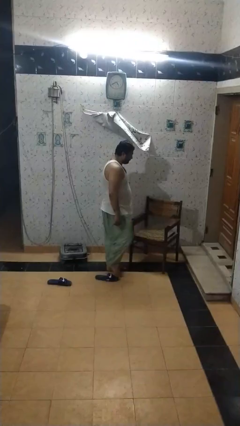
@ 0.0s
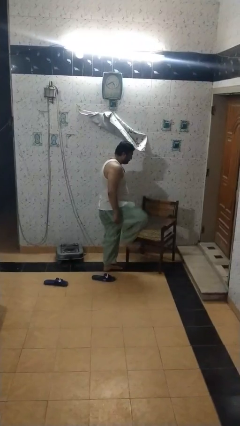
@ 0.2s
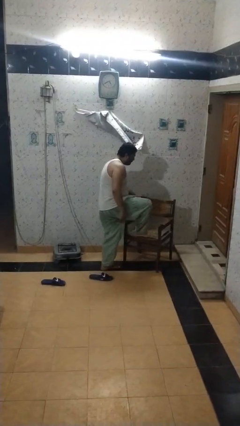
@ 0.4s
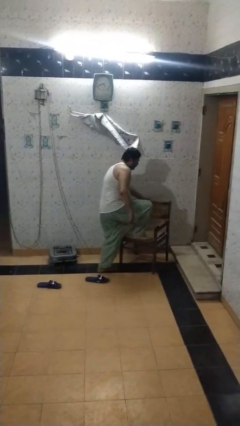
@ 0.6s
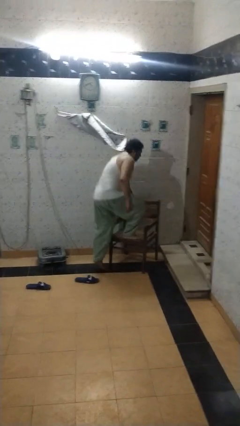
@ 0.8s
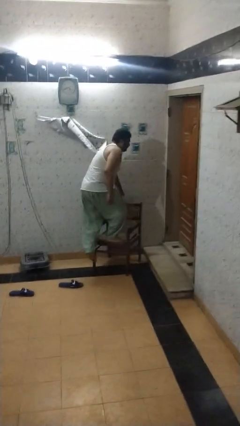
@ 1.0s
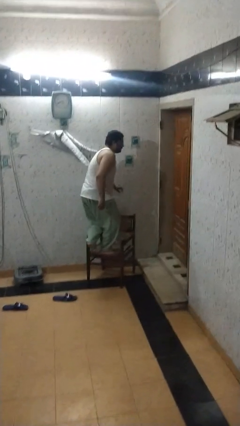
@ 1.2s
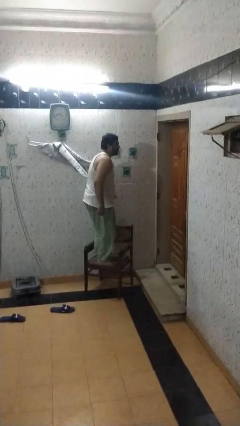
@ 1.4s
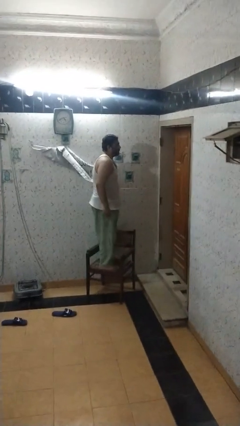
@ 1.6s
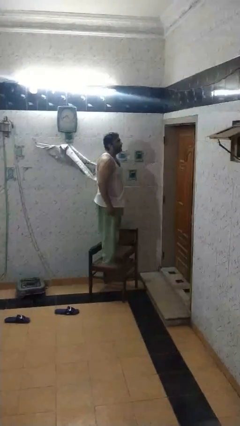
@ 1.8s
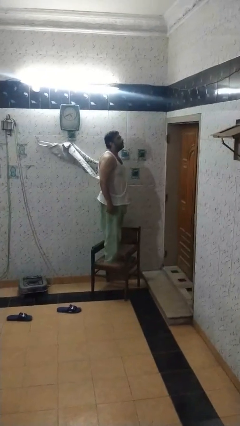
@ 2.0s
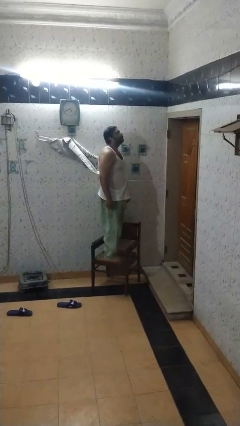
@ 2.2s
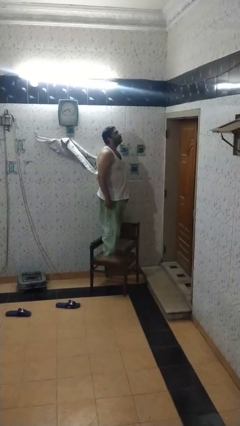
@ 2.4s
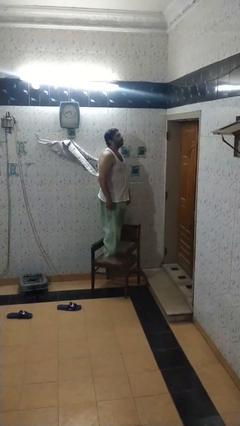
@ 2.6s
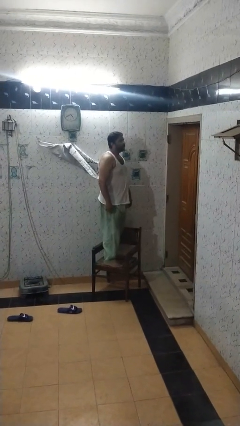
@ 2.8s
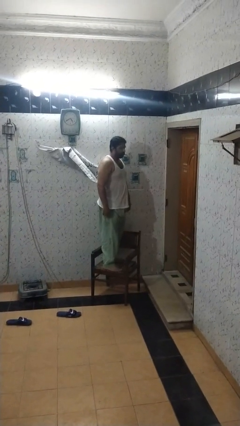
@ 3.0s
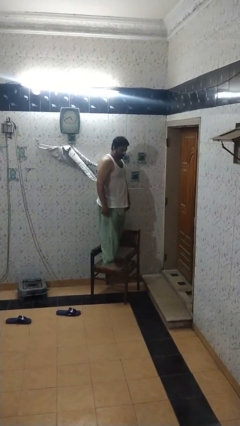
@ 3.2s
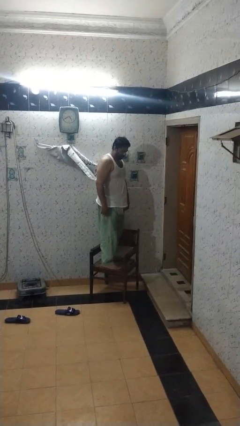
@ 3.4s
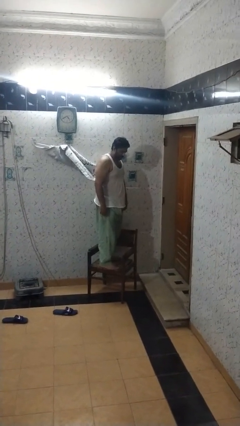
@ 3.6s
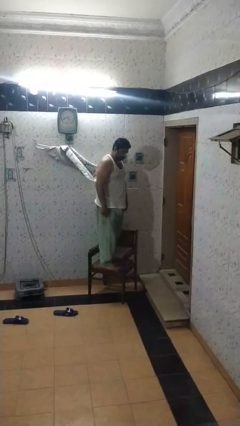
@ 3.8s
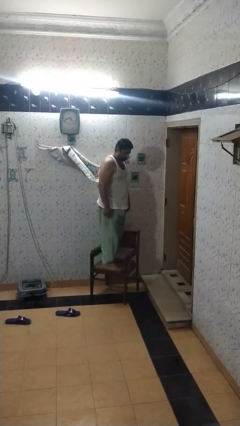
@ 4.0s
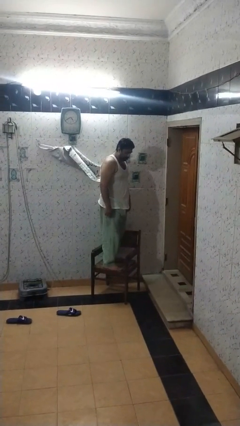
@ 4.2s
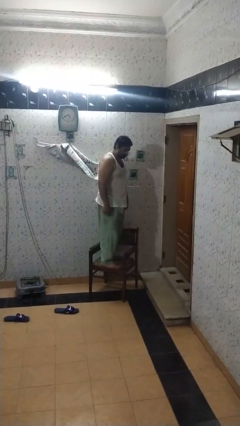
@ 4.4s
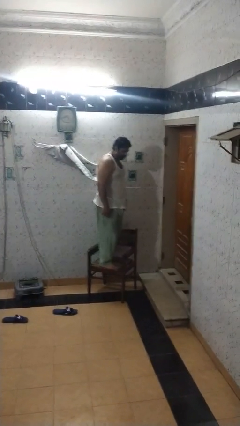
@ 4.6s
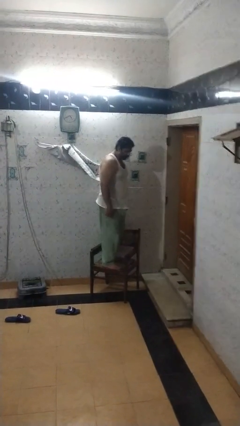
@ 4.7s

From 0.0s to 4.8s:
person climbs on chair

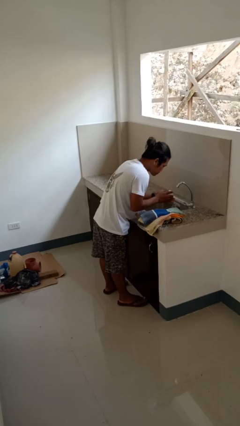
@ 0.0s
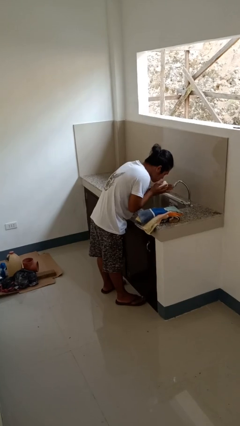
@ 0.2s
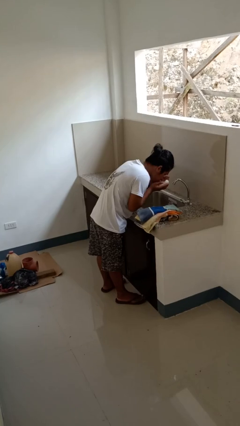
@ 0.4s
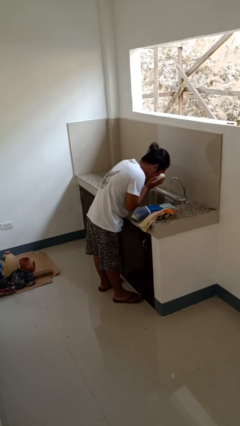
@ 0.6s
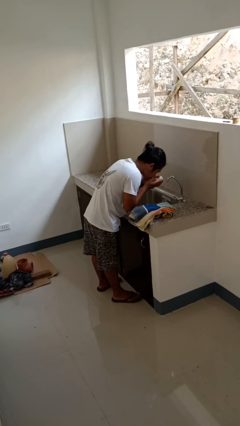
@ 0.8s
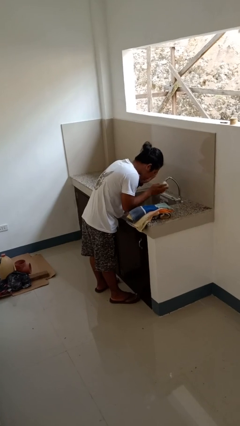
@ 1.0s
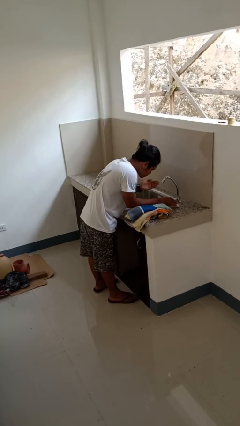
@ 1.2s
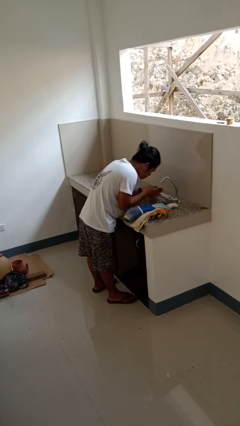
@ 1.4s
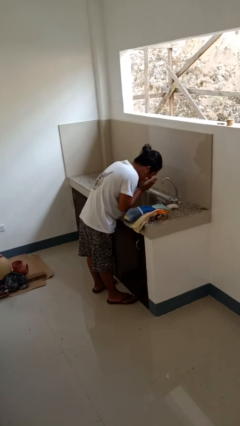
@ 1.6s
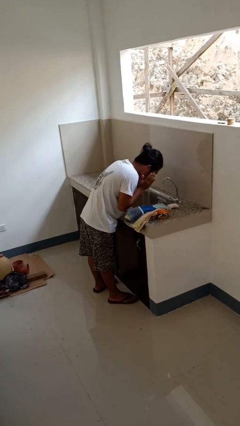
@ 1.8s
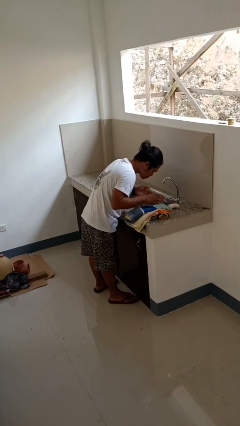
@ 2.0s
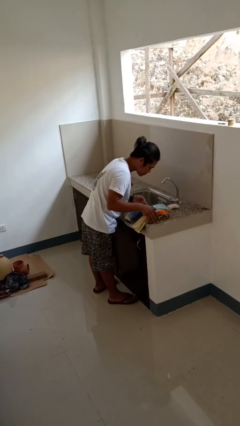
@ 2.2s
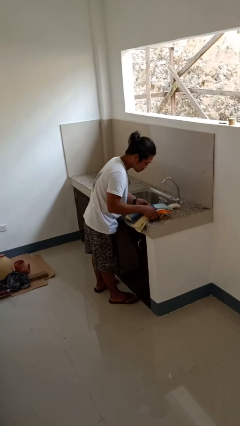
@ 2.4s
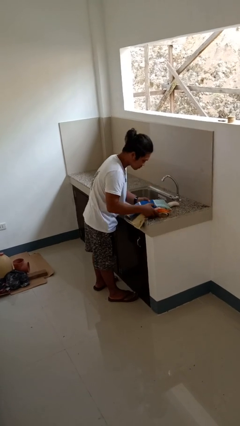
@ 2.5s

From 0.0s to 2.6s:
person washes face

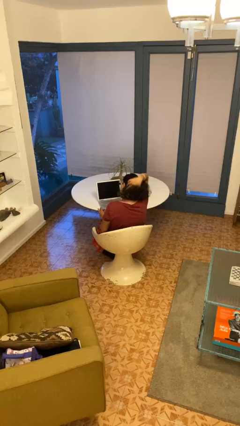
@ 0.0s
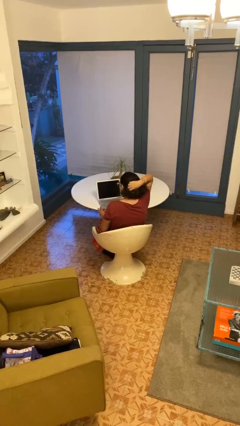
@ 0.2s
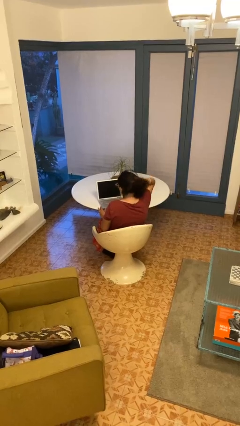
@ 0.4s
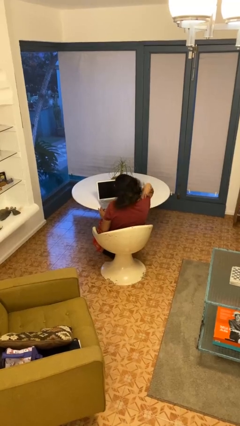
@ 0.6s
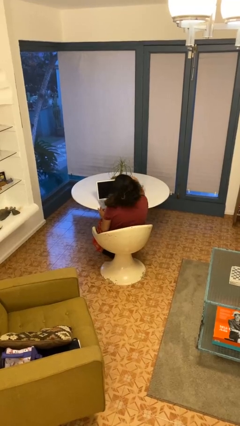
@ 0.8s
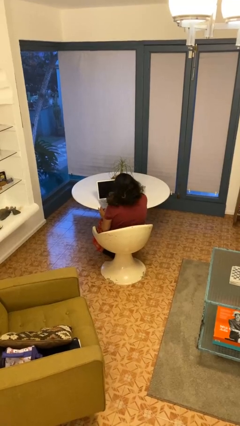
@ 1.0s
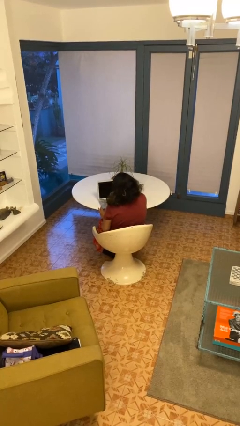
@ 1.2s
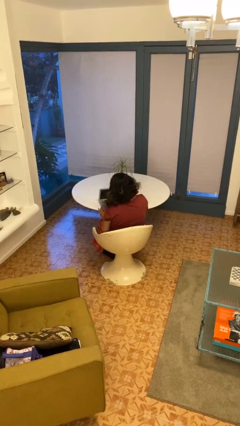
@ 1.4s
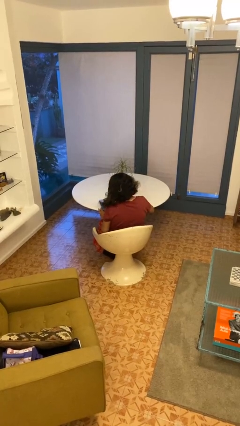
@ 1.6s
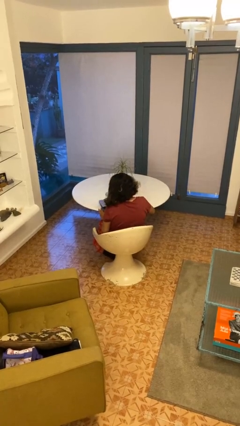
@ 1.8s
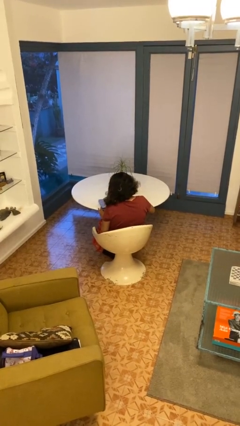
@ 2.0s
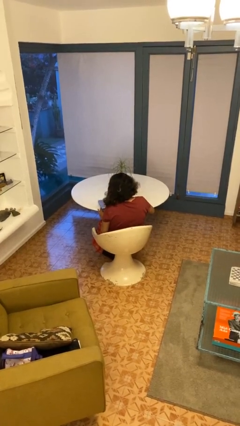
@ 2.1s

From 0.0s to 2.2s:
person closes laptop

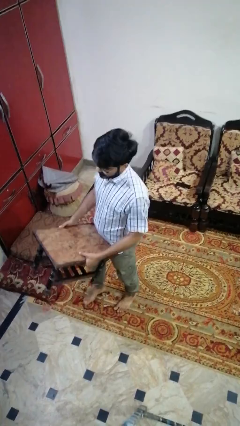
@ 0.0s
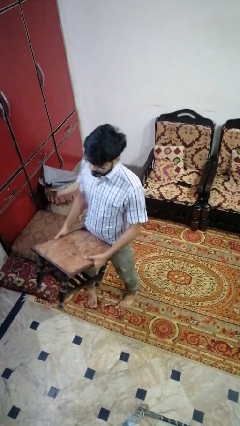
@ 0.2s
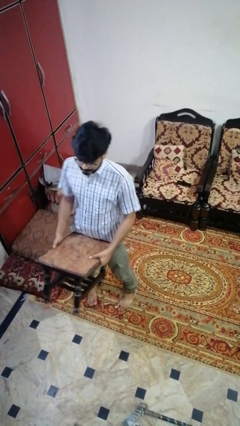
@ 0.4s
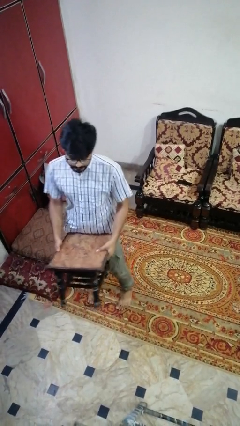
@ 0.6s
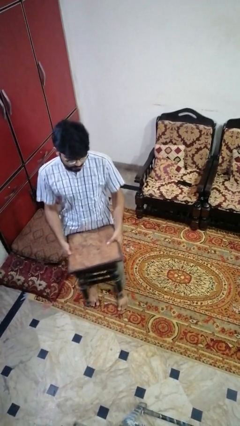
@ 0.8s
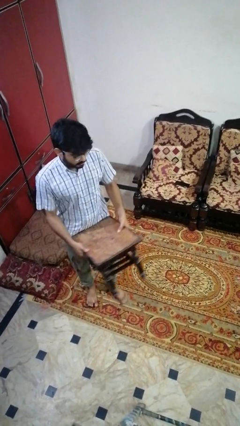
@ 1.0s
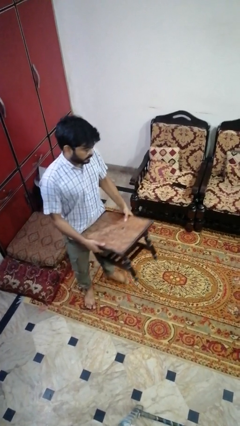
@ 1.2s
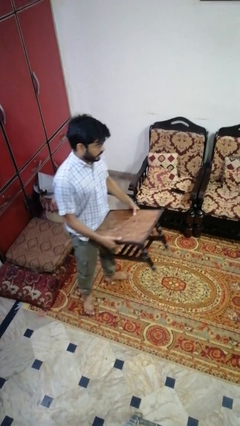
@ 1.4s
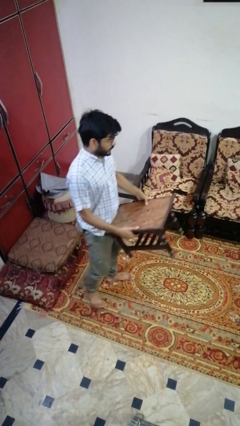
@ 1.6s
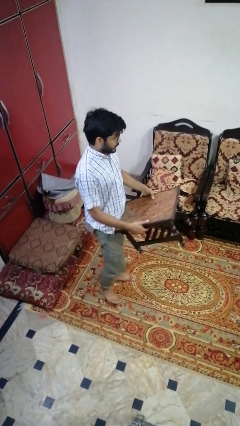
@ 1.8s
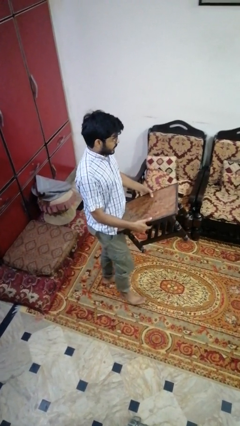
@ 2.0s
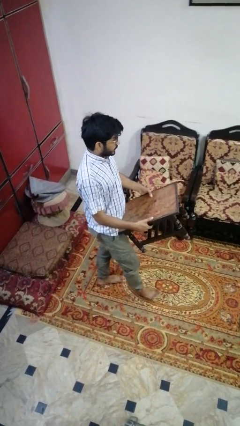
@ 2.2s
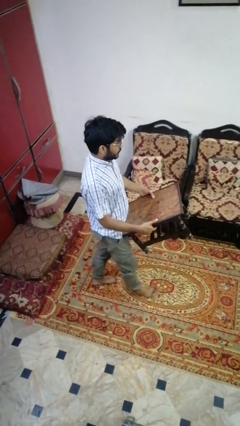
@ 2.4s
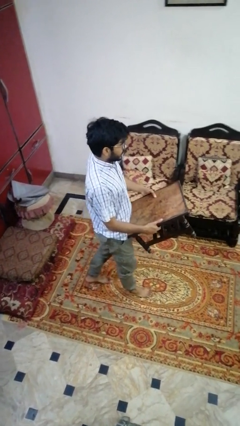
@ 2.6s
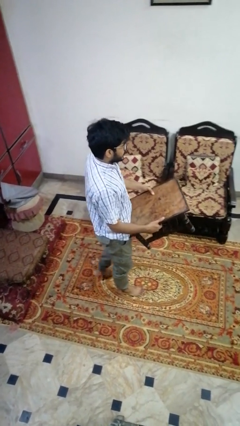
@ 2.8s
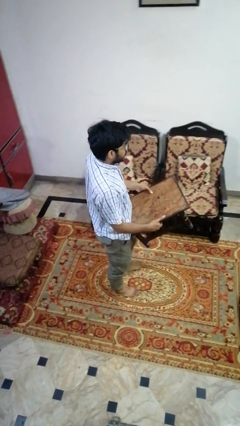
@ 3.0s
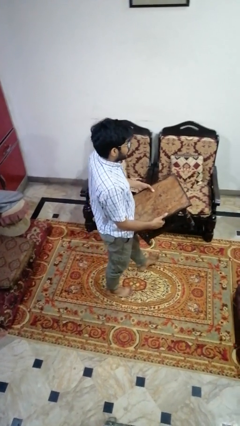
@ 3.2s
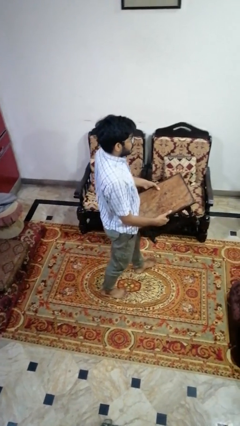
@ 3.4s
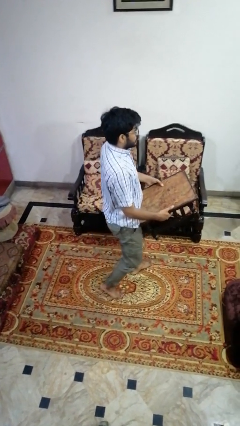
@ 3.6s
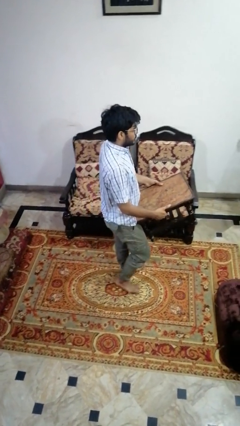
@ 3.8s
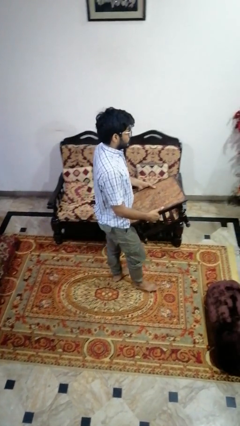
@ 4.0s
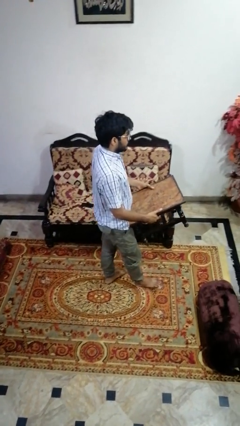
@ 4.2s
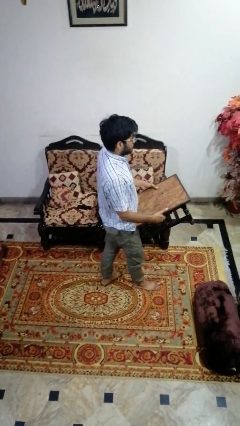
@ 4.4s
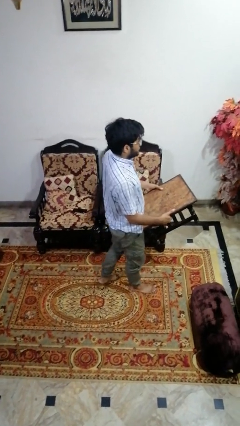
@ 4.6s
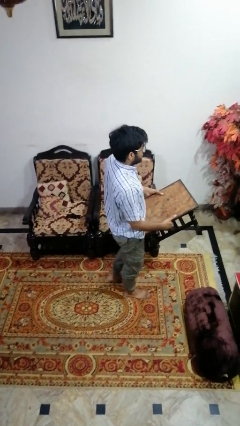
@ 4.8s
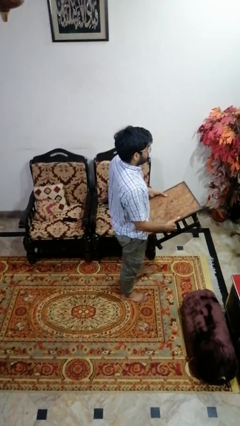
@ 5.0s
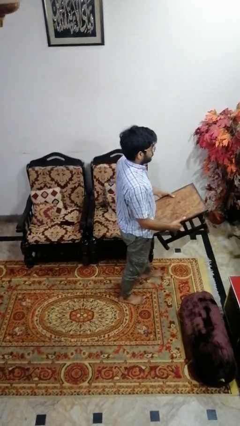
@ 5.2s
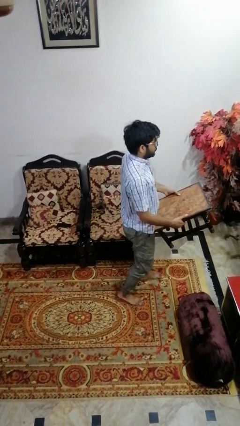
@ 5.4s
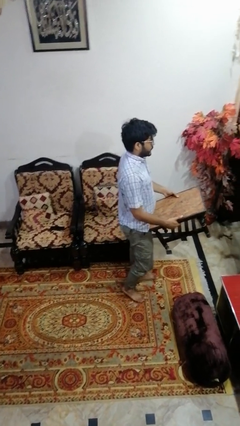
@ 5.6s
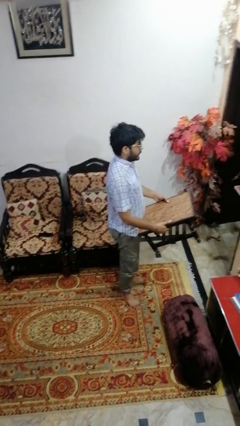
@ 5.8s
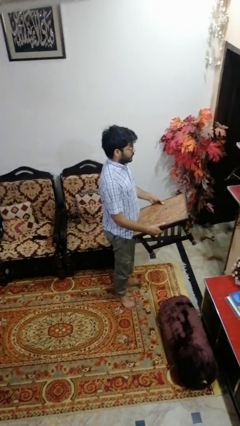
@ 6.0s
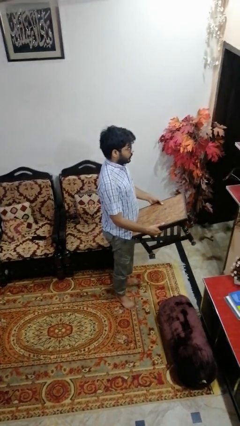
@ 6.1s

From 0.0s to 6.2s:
person carries furniture

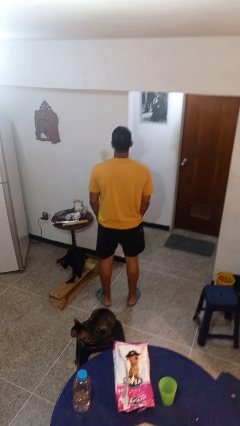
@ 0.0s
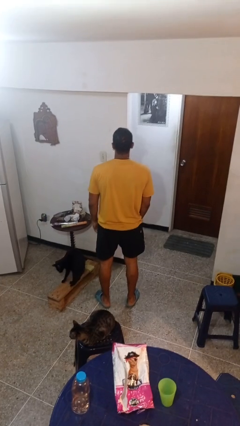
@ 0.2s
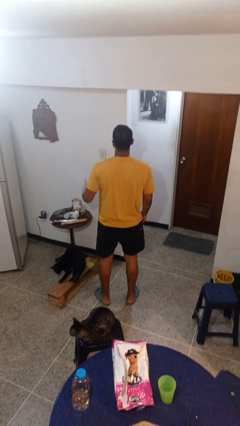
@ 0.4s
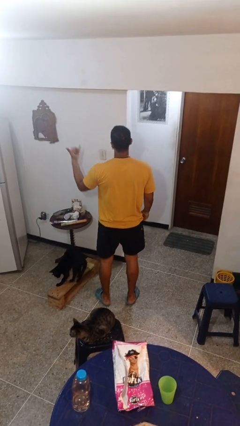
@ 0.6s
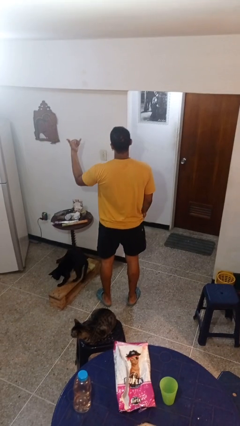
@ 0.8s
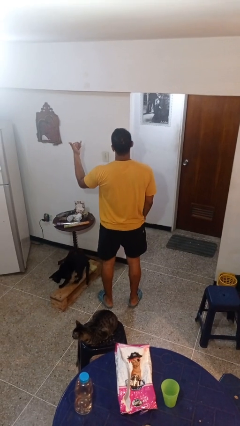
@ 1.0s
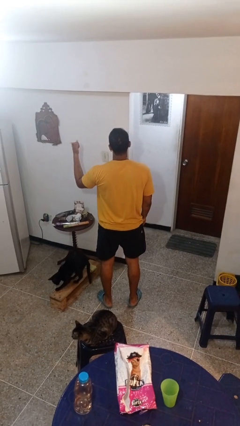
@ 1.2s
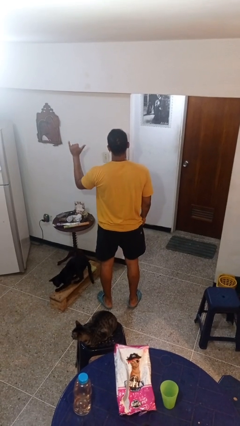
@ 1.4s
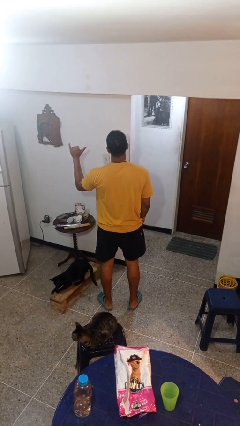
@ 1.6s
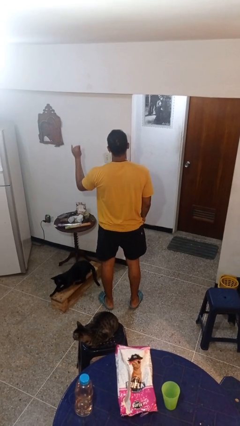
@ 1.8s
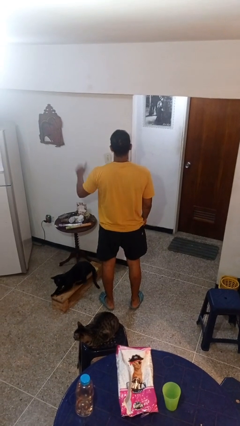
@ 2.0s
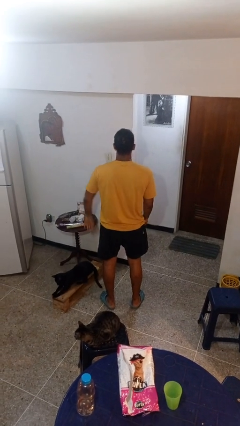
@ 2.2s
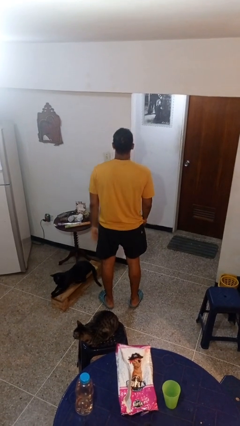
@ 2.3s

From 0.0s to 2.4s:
person gestures hang loose
